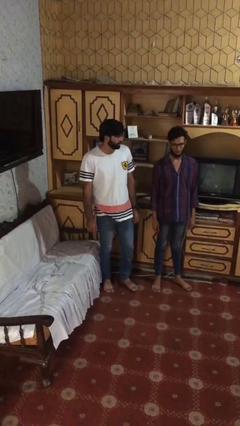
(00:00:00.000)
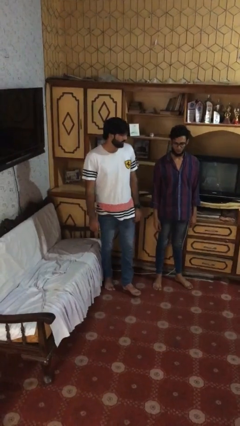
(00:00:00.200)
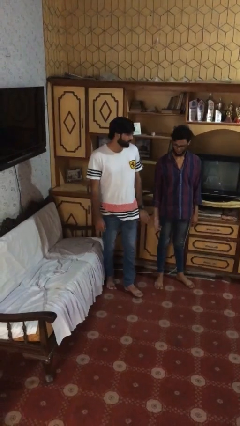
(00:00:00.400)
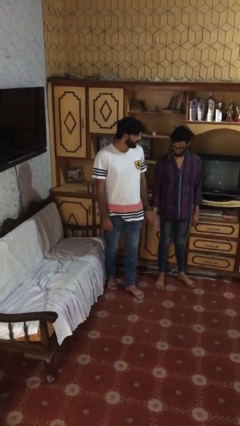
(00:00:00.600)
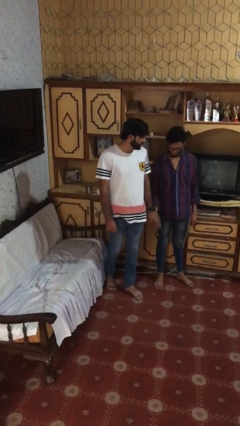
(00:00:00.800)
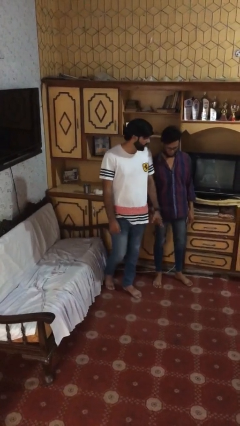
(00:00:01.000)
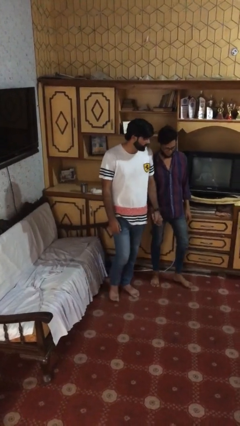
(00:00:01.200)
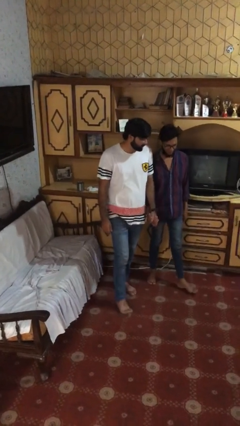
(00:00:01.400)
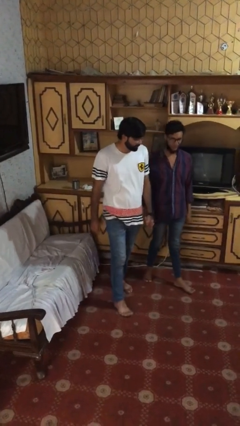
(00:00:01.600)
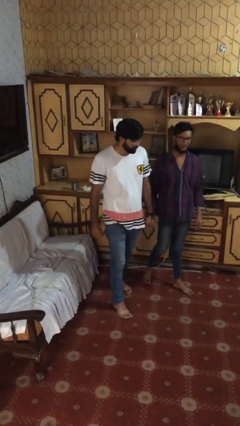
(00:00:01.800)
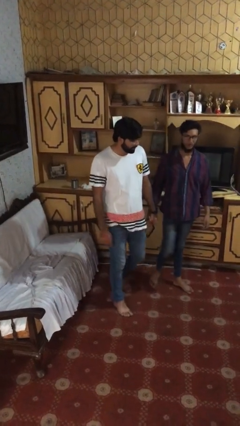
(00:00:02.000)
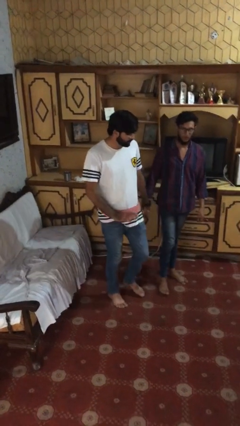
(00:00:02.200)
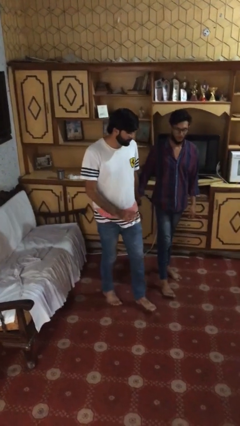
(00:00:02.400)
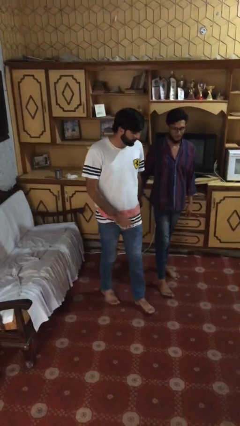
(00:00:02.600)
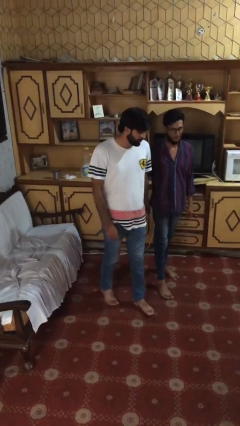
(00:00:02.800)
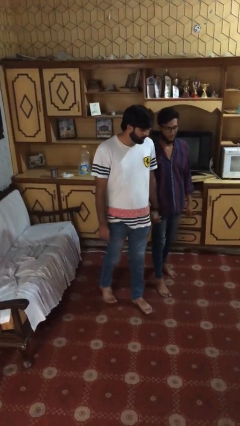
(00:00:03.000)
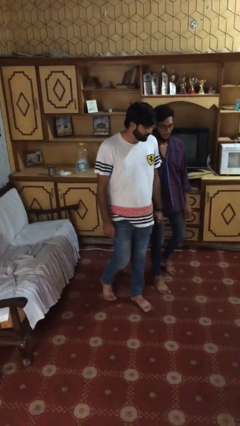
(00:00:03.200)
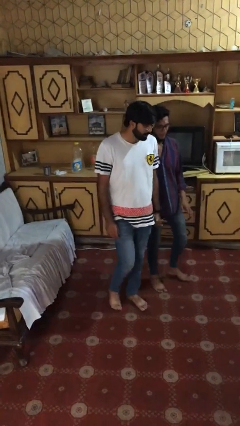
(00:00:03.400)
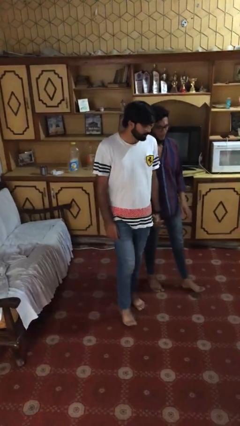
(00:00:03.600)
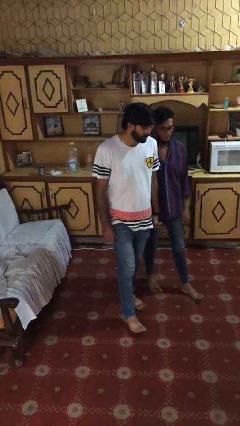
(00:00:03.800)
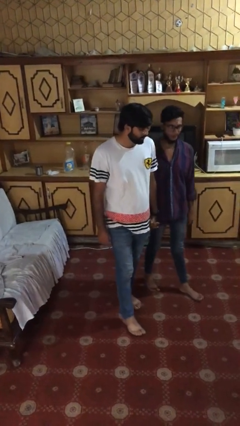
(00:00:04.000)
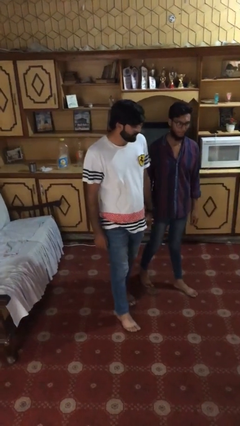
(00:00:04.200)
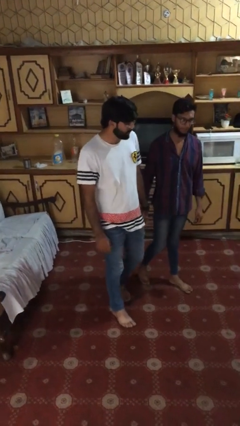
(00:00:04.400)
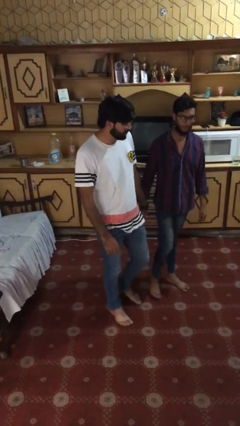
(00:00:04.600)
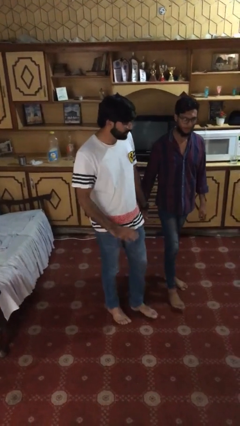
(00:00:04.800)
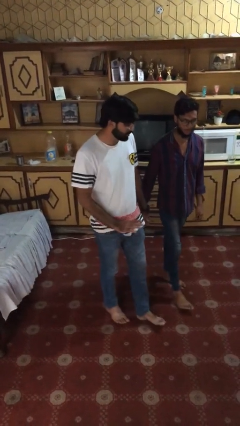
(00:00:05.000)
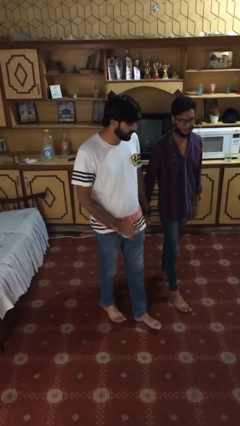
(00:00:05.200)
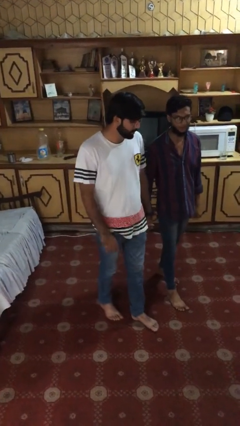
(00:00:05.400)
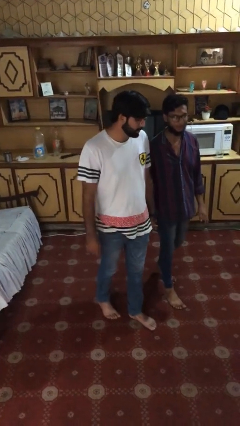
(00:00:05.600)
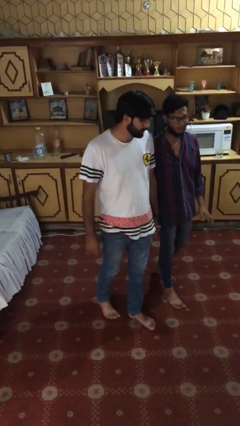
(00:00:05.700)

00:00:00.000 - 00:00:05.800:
person holds hand

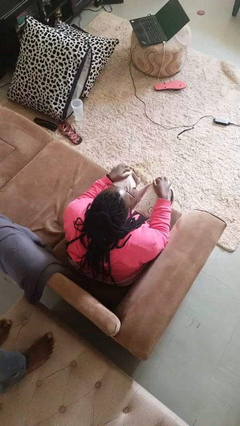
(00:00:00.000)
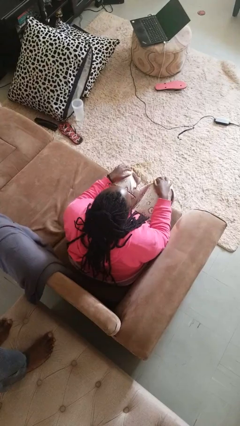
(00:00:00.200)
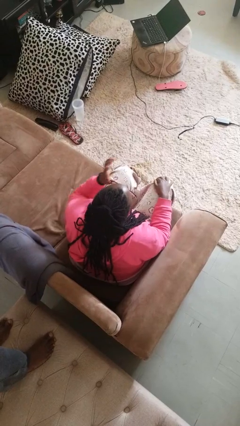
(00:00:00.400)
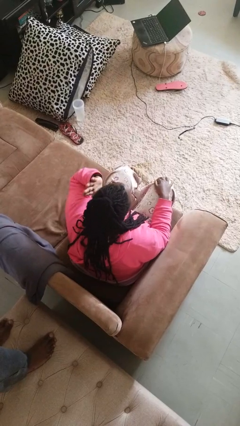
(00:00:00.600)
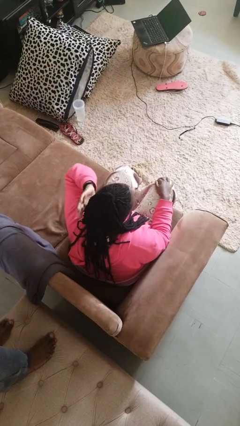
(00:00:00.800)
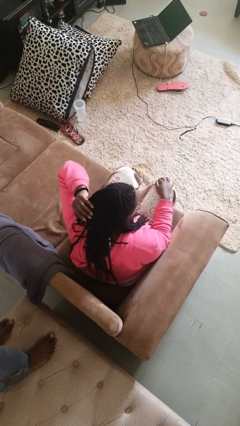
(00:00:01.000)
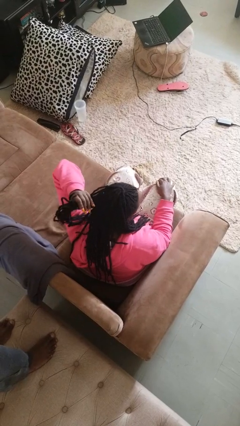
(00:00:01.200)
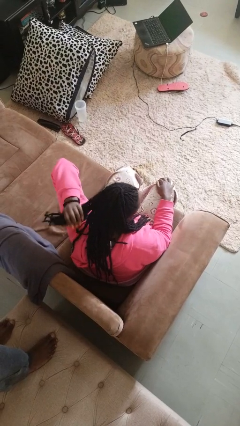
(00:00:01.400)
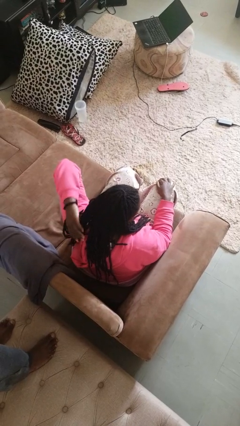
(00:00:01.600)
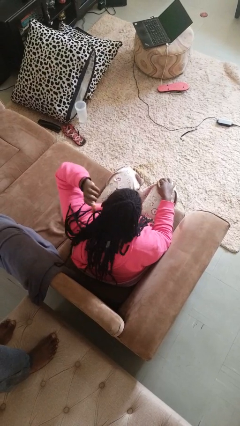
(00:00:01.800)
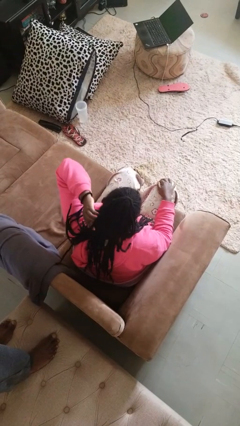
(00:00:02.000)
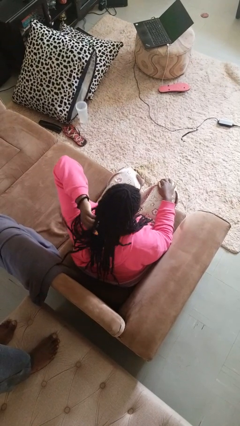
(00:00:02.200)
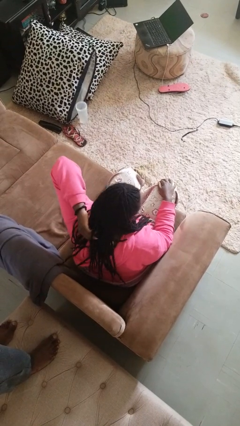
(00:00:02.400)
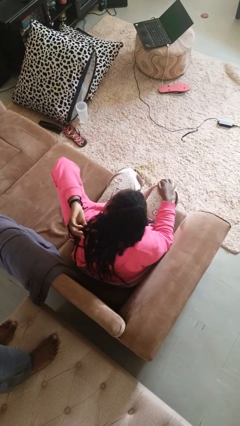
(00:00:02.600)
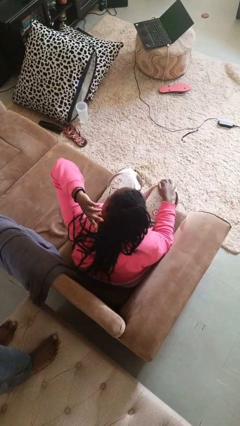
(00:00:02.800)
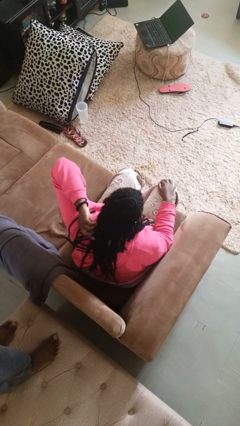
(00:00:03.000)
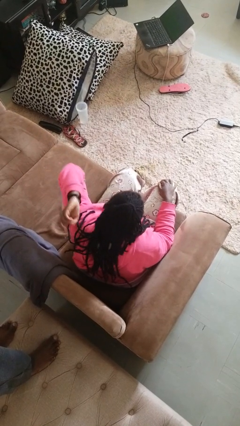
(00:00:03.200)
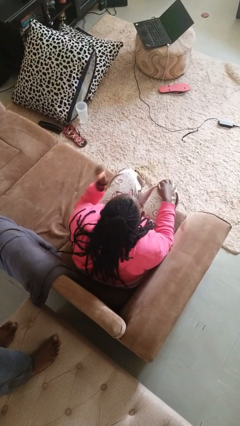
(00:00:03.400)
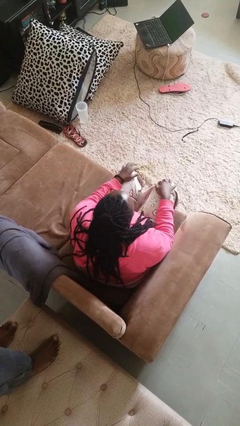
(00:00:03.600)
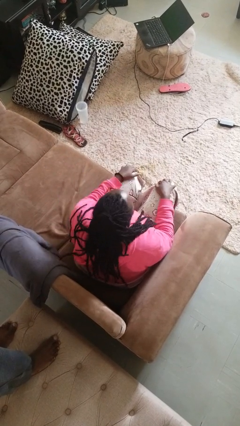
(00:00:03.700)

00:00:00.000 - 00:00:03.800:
person strokes hair

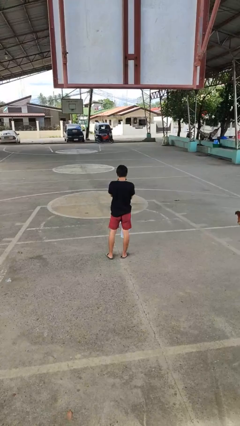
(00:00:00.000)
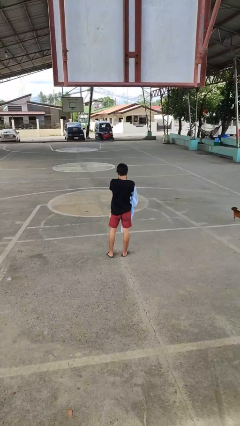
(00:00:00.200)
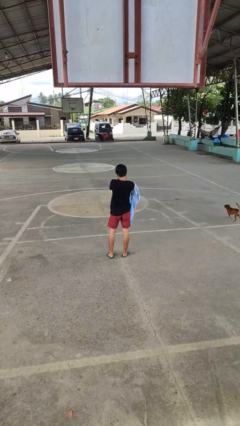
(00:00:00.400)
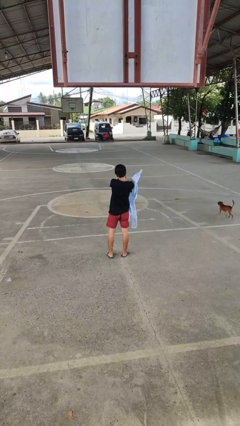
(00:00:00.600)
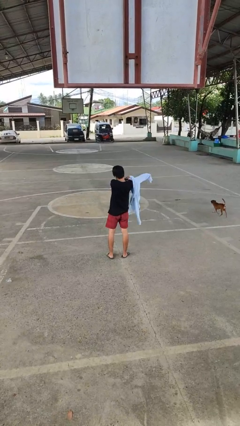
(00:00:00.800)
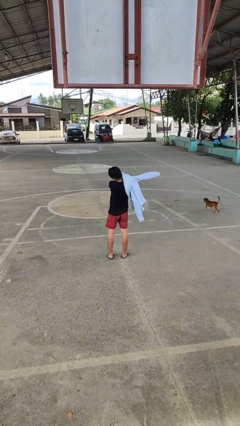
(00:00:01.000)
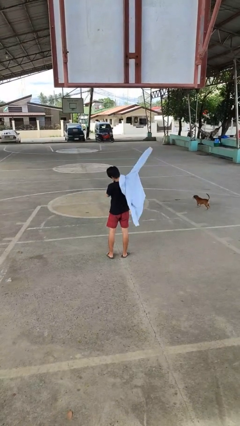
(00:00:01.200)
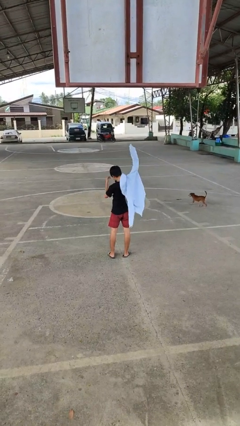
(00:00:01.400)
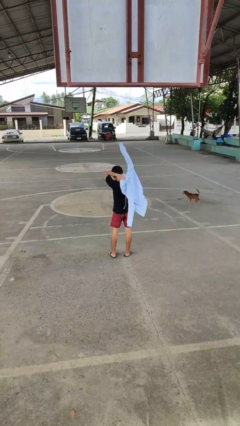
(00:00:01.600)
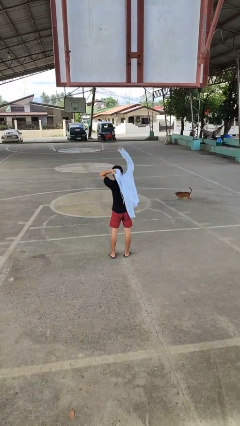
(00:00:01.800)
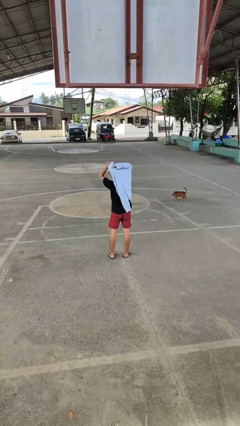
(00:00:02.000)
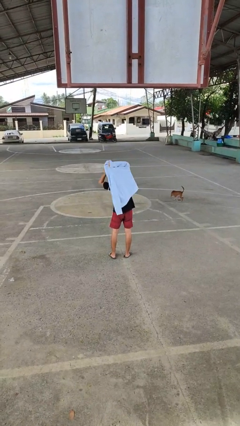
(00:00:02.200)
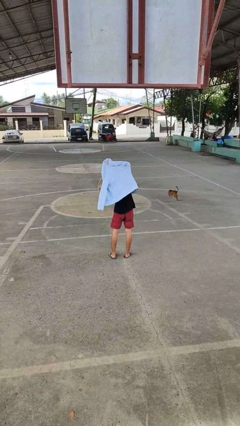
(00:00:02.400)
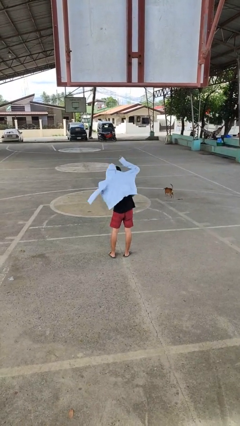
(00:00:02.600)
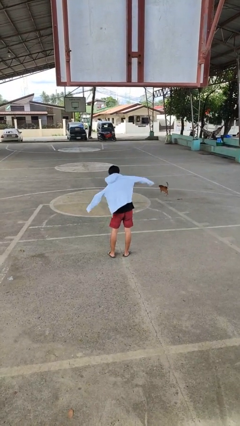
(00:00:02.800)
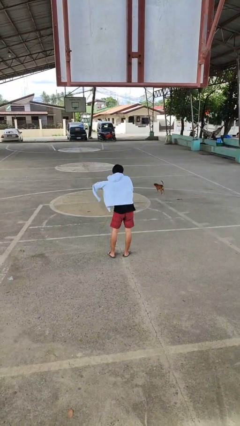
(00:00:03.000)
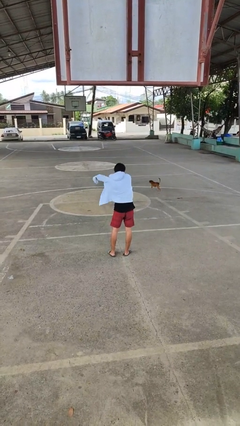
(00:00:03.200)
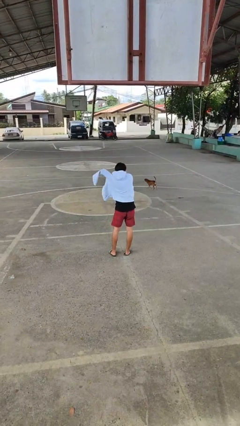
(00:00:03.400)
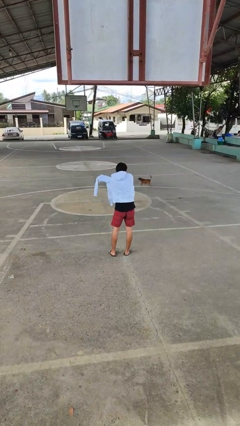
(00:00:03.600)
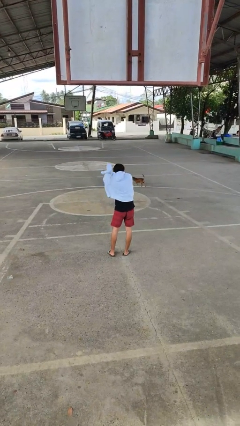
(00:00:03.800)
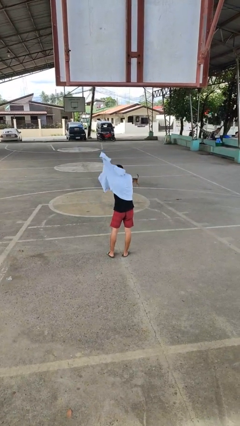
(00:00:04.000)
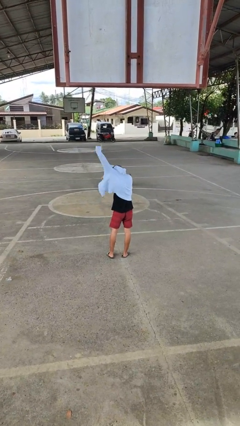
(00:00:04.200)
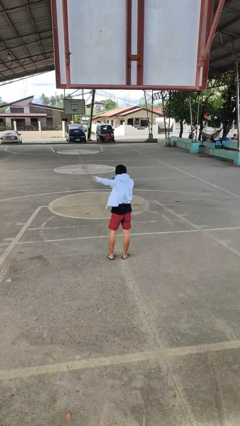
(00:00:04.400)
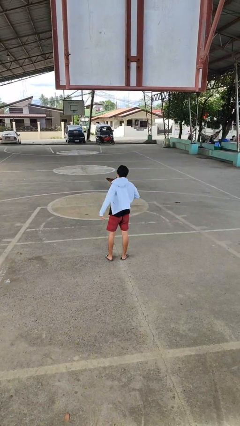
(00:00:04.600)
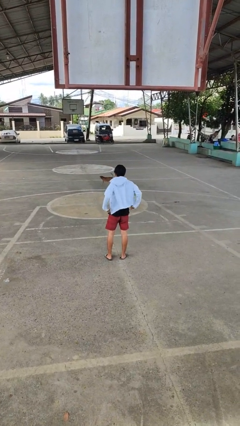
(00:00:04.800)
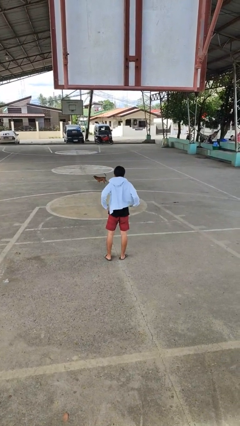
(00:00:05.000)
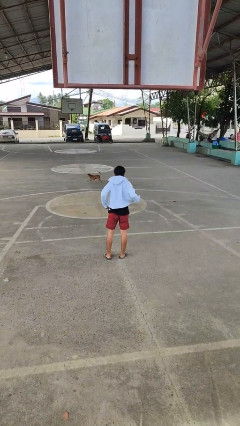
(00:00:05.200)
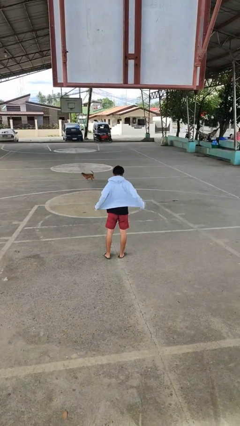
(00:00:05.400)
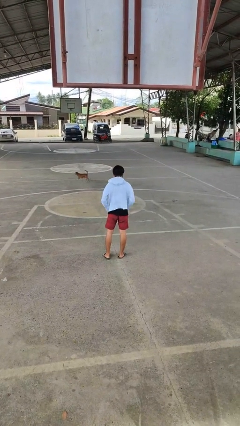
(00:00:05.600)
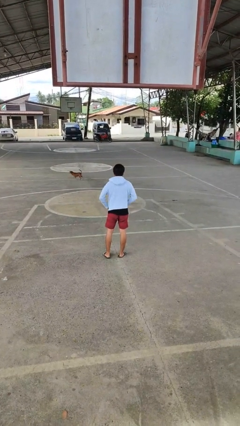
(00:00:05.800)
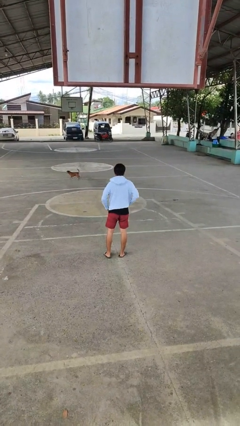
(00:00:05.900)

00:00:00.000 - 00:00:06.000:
person puts on jacket

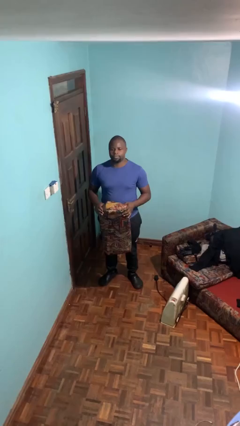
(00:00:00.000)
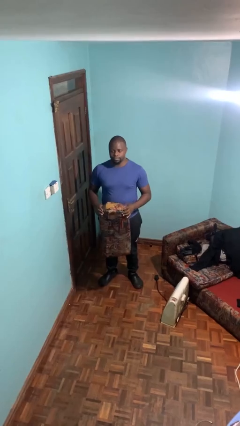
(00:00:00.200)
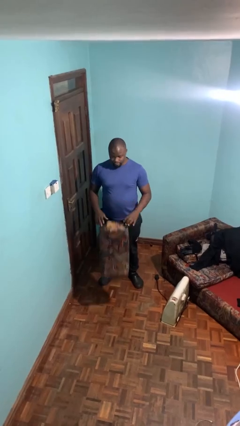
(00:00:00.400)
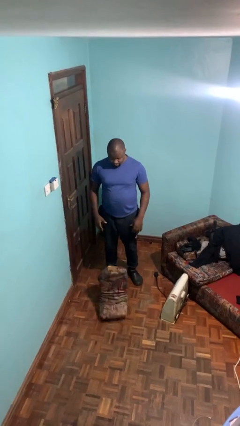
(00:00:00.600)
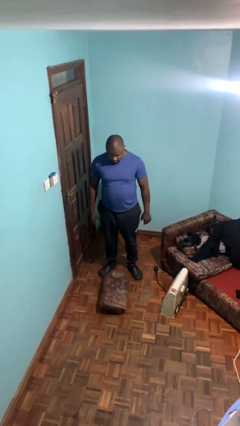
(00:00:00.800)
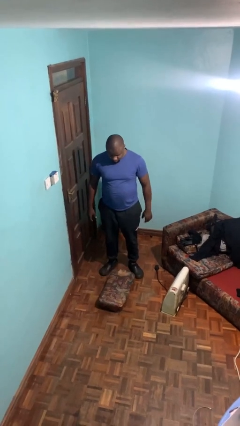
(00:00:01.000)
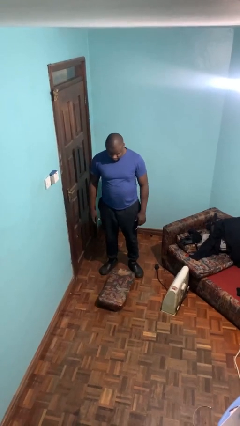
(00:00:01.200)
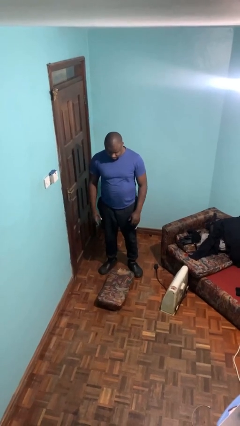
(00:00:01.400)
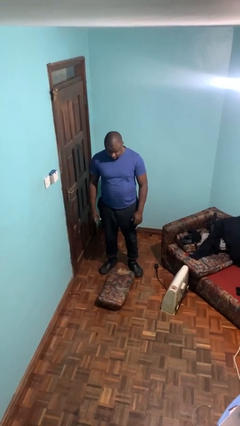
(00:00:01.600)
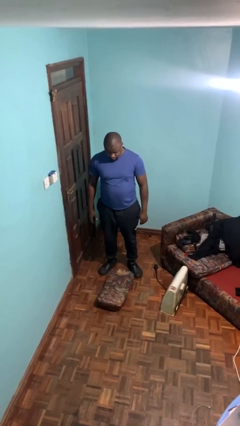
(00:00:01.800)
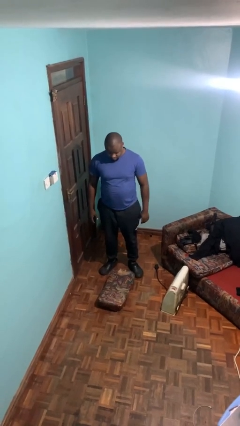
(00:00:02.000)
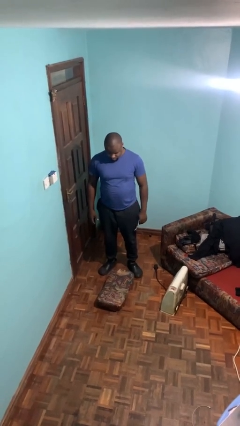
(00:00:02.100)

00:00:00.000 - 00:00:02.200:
person drops object
